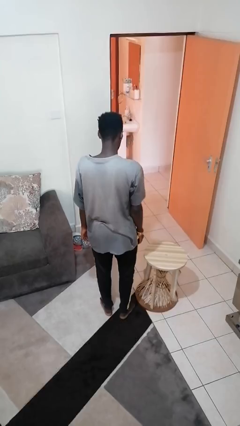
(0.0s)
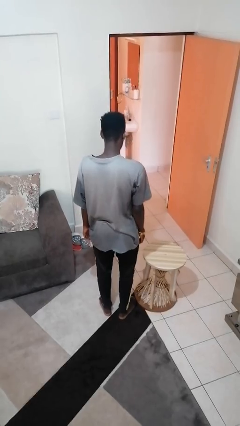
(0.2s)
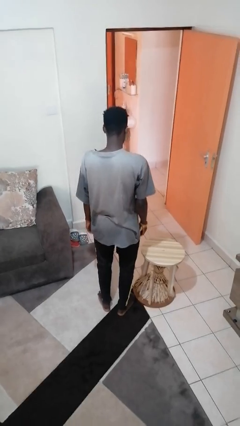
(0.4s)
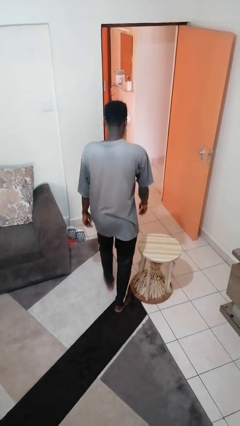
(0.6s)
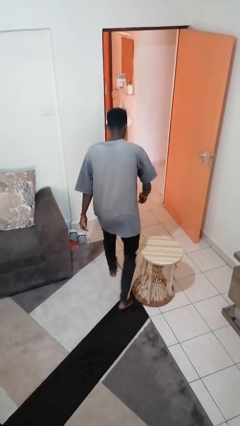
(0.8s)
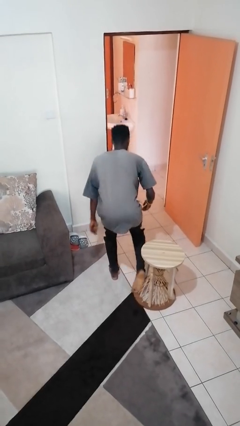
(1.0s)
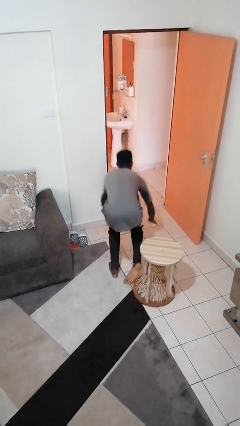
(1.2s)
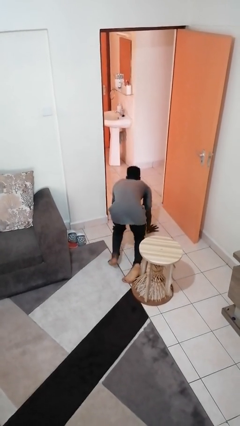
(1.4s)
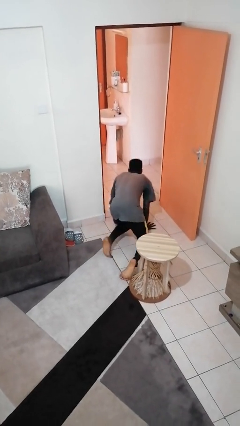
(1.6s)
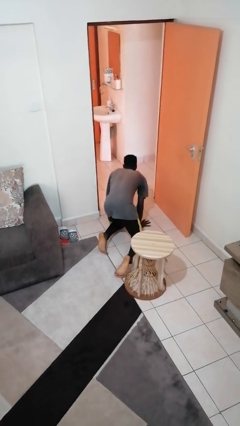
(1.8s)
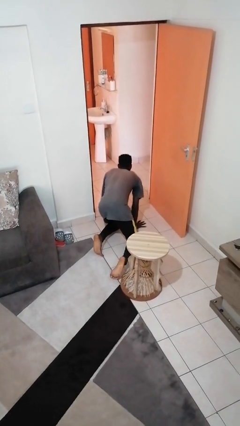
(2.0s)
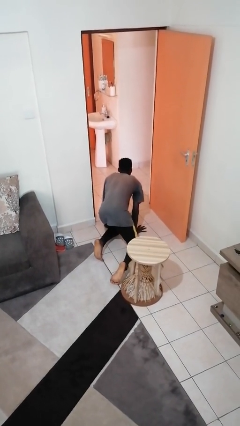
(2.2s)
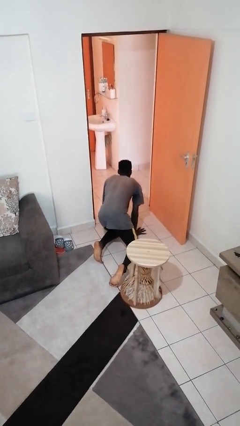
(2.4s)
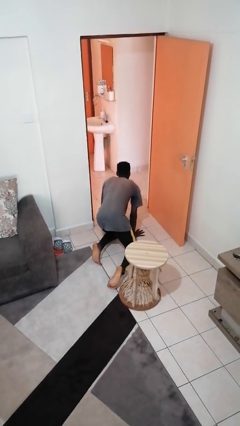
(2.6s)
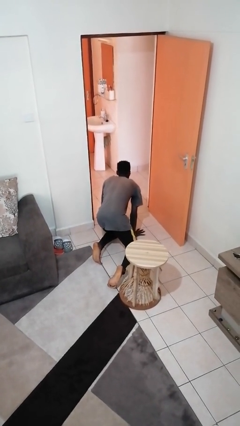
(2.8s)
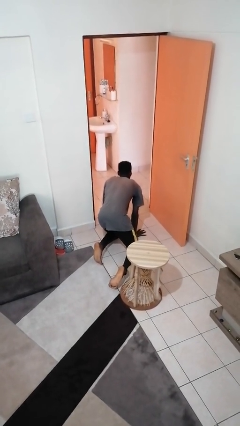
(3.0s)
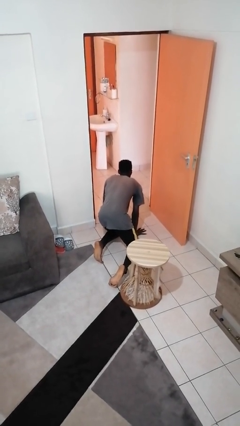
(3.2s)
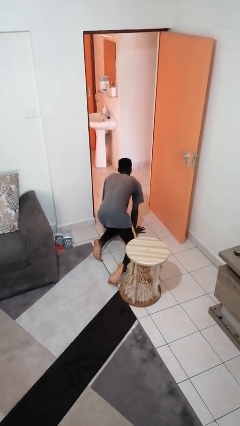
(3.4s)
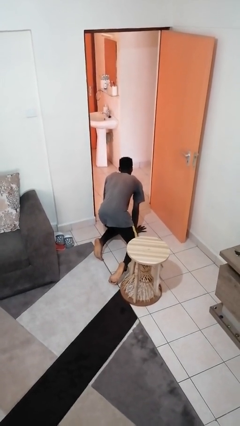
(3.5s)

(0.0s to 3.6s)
person trips on object on floor

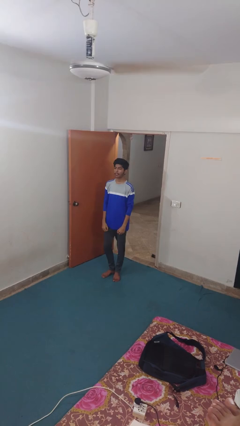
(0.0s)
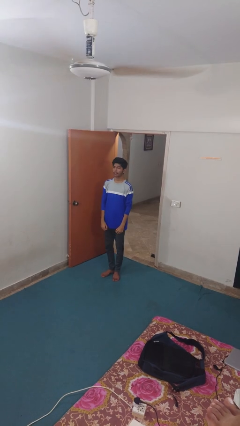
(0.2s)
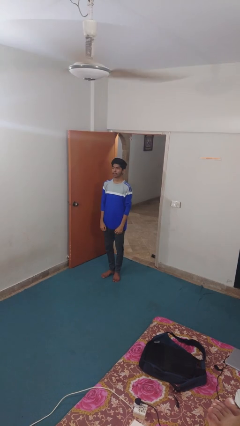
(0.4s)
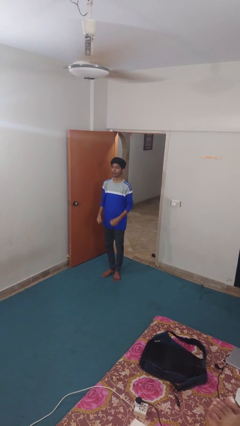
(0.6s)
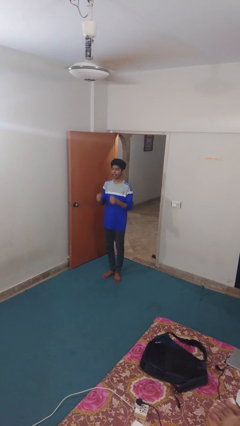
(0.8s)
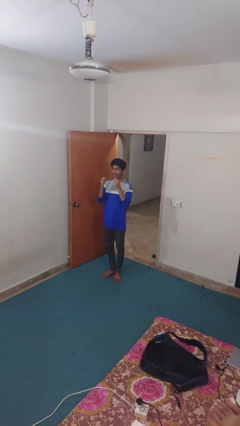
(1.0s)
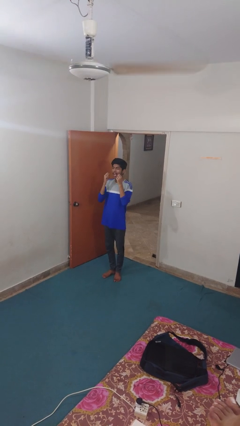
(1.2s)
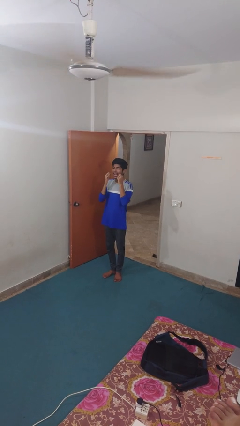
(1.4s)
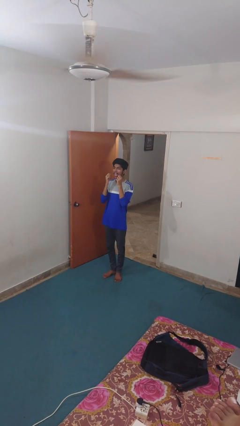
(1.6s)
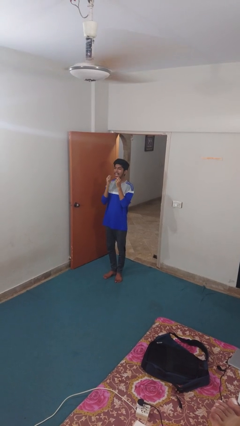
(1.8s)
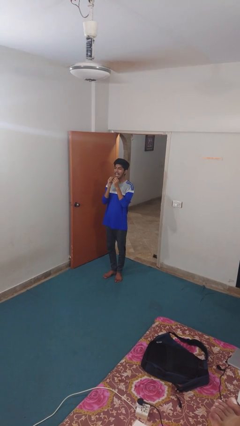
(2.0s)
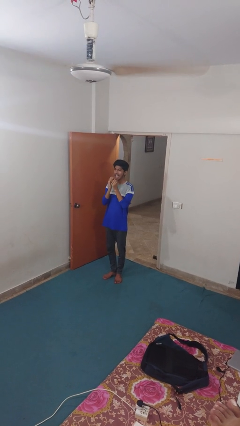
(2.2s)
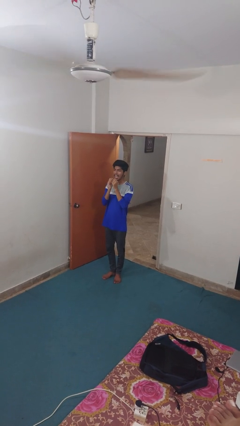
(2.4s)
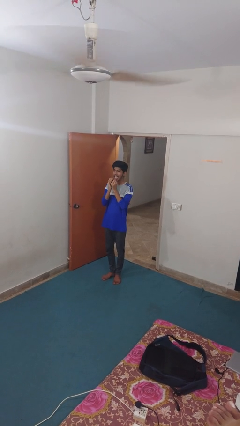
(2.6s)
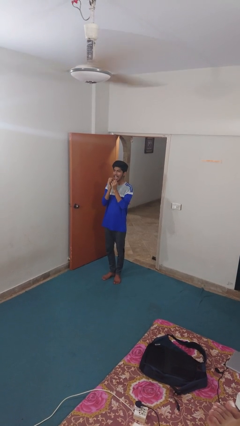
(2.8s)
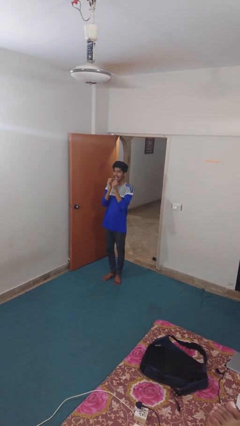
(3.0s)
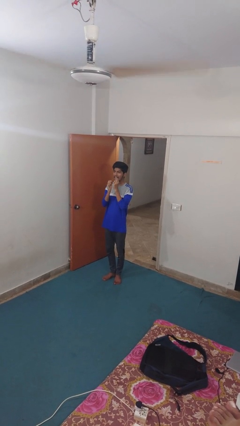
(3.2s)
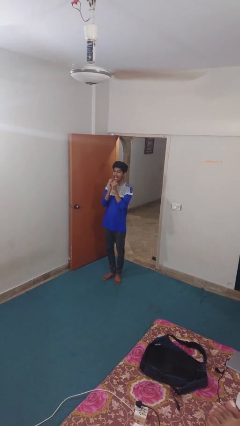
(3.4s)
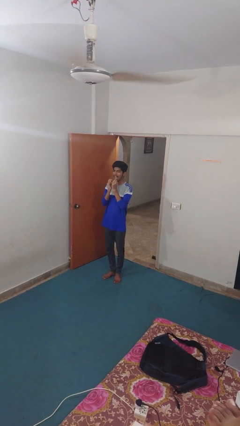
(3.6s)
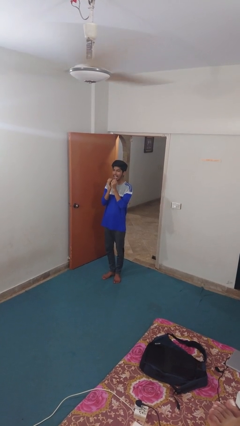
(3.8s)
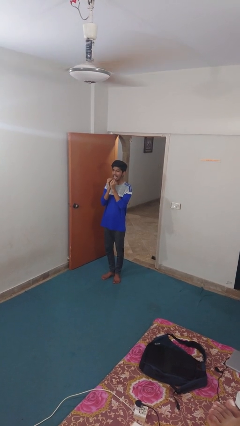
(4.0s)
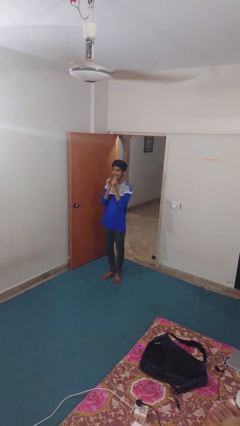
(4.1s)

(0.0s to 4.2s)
person flosses

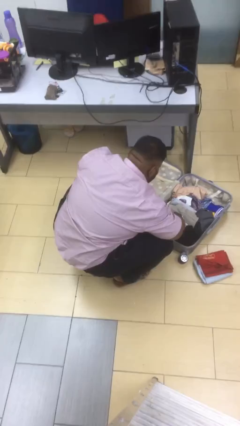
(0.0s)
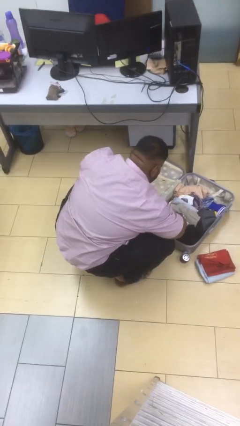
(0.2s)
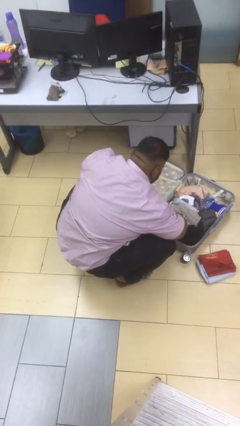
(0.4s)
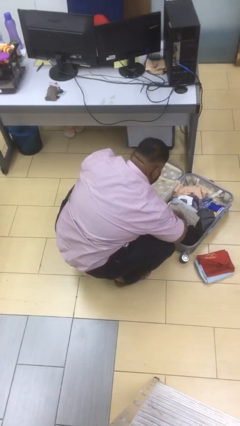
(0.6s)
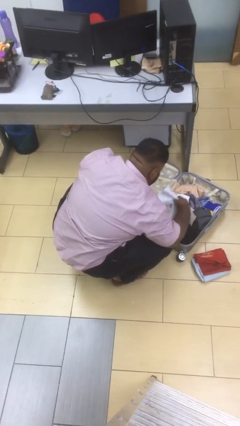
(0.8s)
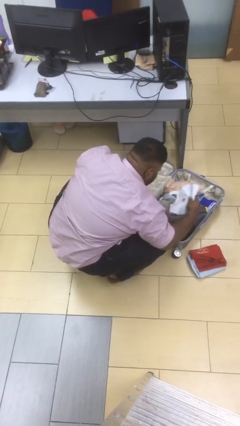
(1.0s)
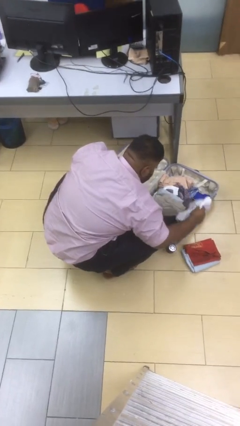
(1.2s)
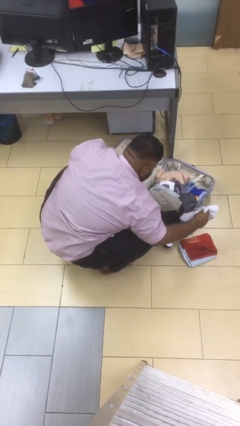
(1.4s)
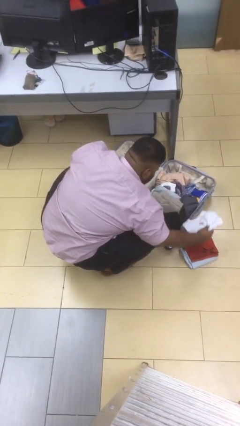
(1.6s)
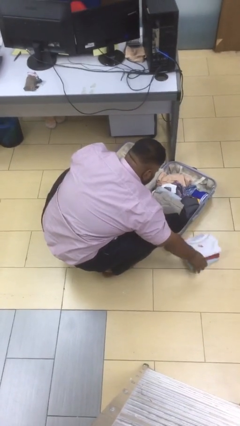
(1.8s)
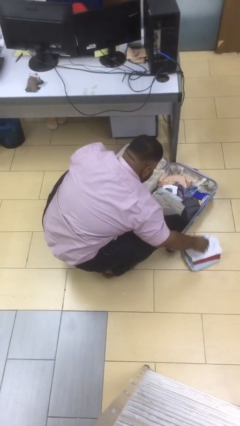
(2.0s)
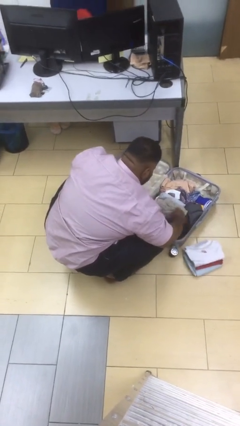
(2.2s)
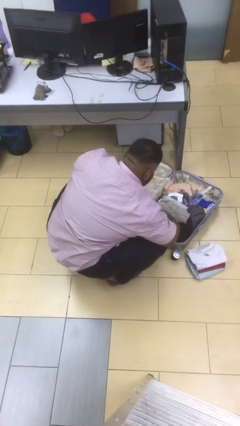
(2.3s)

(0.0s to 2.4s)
person unloads clothes from suitcase

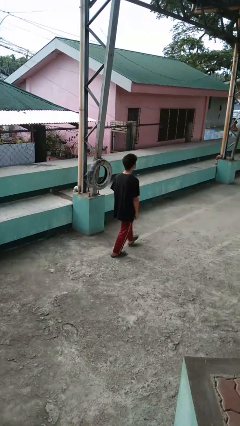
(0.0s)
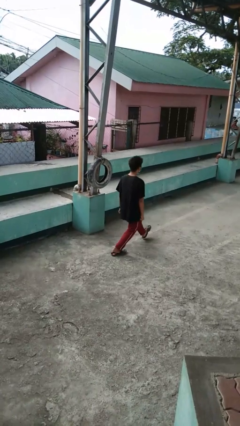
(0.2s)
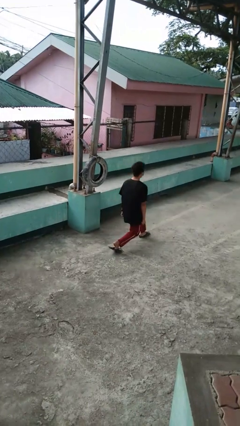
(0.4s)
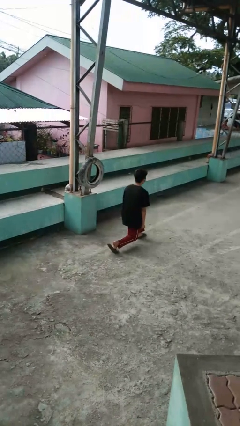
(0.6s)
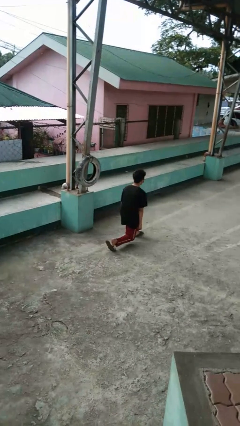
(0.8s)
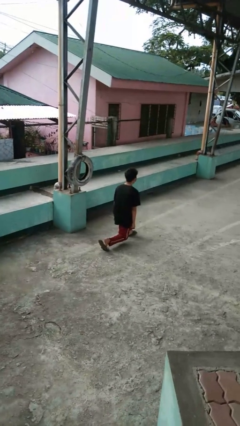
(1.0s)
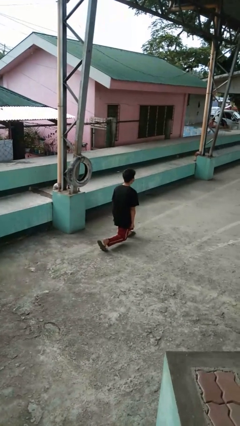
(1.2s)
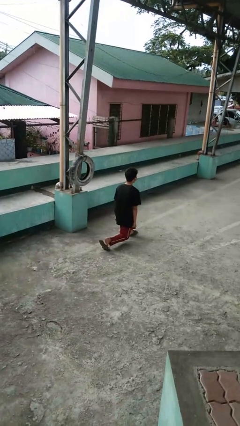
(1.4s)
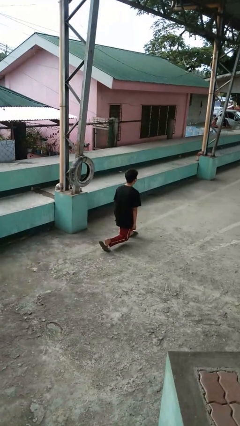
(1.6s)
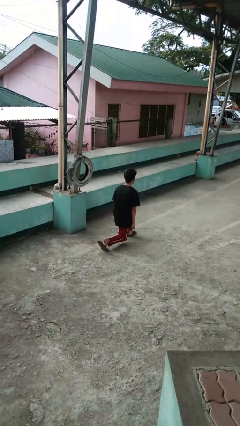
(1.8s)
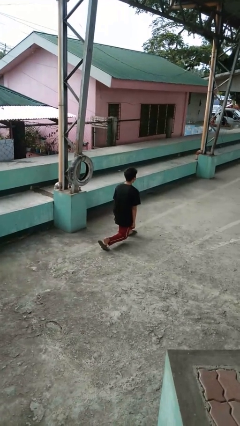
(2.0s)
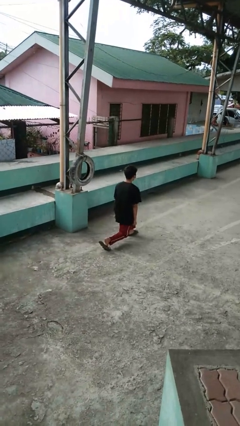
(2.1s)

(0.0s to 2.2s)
person exercises with lunges

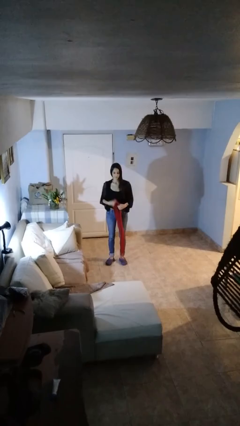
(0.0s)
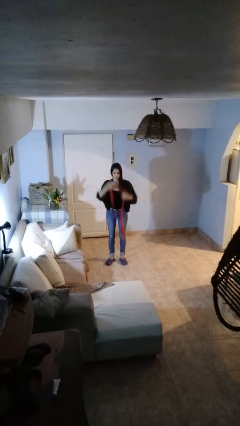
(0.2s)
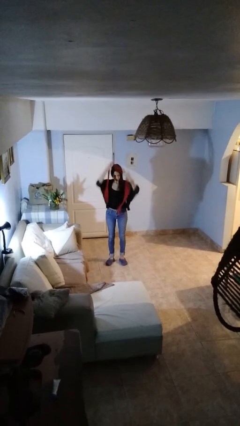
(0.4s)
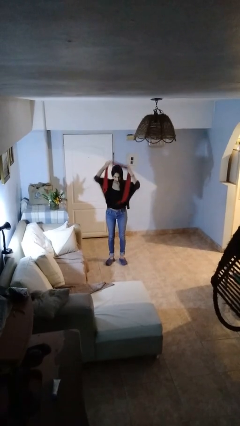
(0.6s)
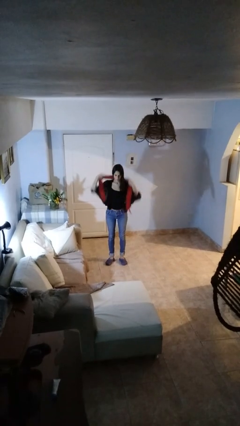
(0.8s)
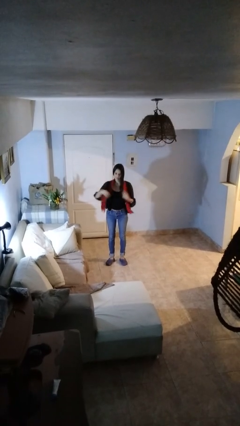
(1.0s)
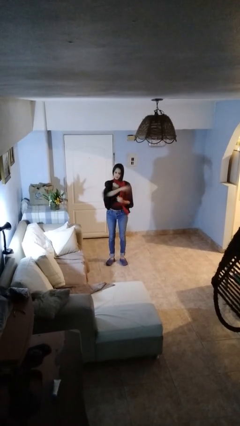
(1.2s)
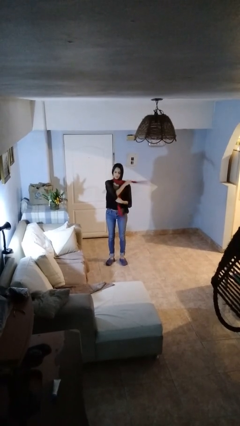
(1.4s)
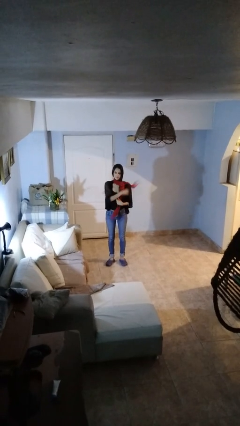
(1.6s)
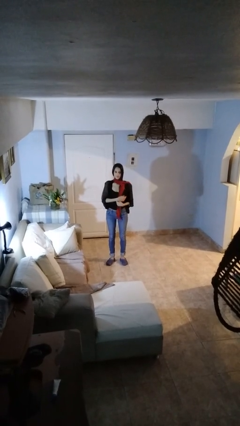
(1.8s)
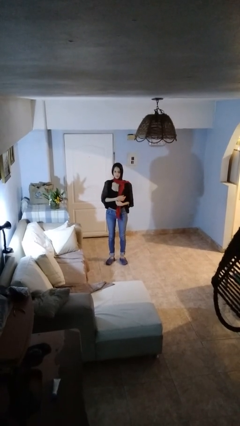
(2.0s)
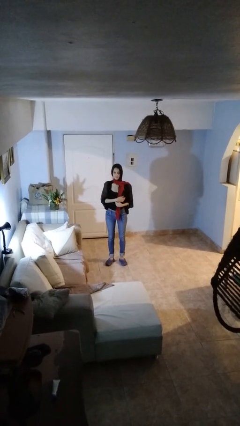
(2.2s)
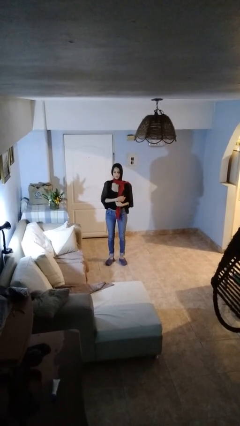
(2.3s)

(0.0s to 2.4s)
person puts on scarf

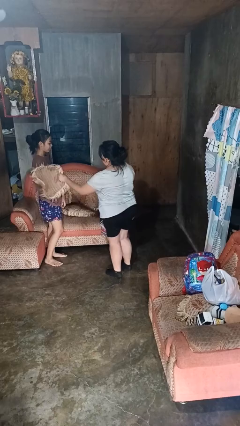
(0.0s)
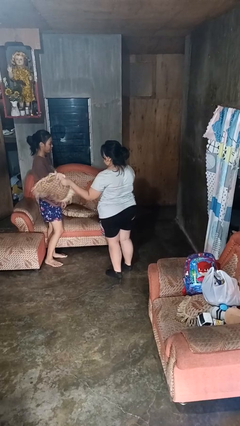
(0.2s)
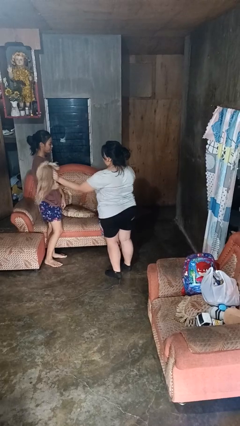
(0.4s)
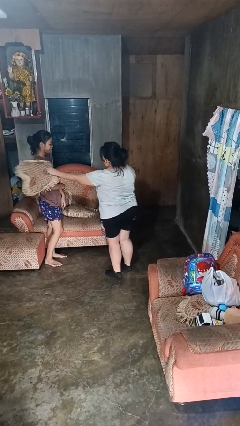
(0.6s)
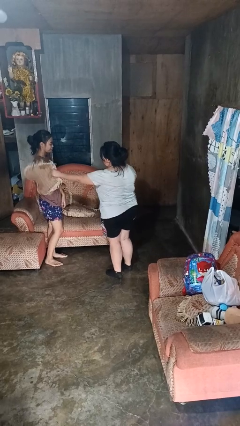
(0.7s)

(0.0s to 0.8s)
person hits person with pillow

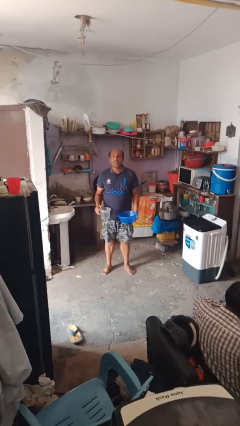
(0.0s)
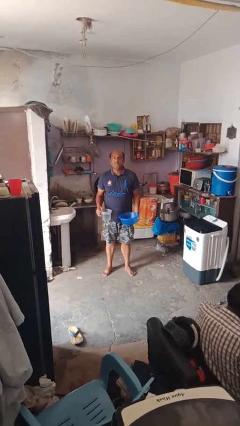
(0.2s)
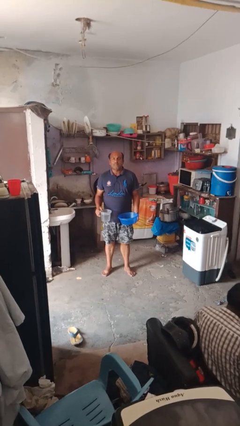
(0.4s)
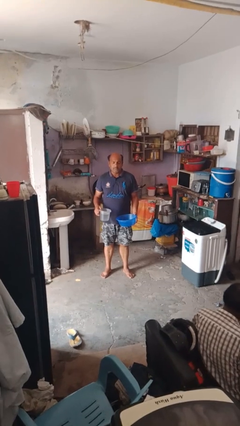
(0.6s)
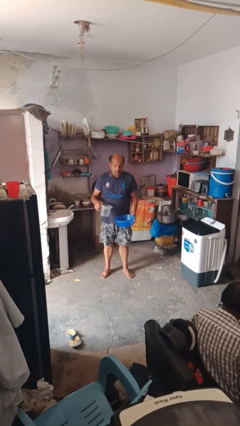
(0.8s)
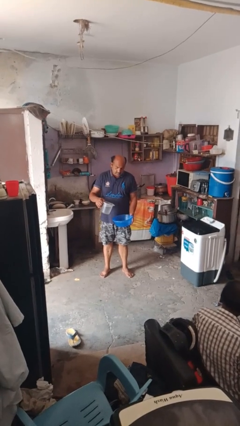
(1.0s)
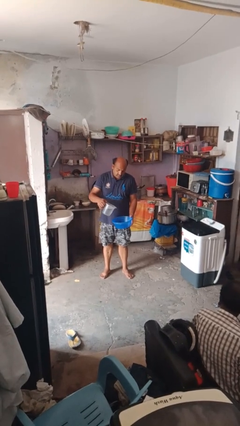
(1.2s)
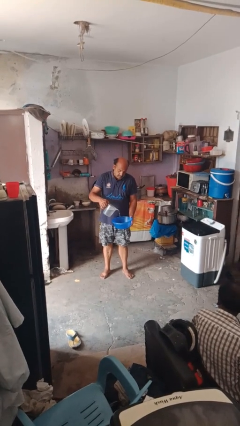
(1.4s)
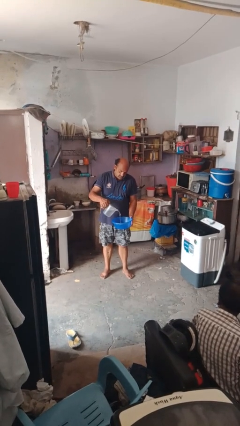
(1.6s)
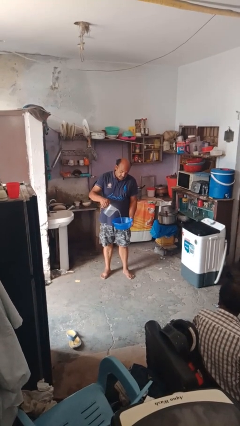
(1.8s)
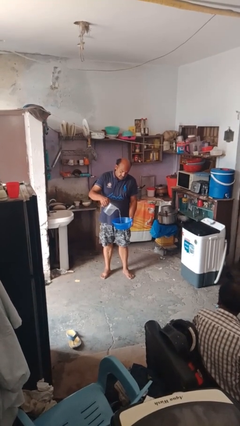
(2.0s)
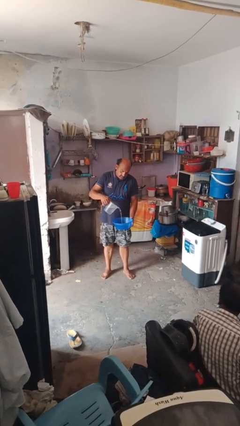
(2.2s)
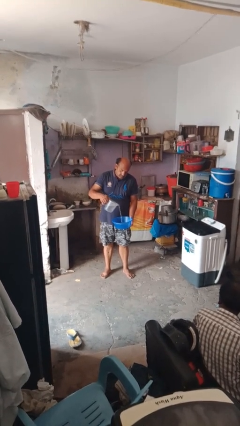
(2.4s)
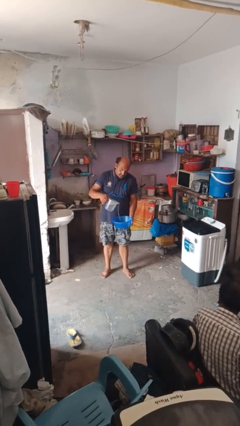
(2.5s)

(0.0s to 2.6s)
person pours into bowl
